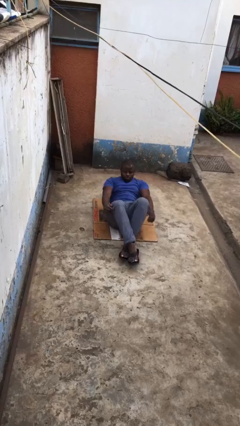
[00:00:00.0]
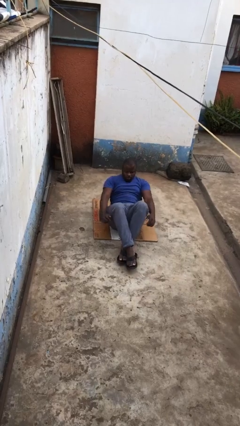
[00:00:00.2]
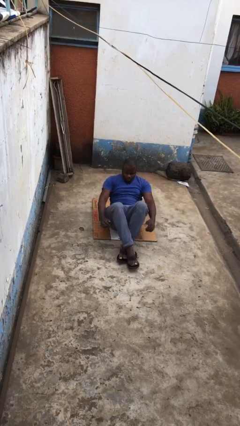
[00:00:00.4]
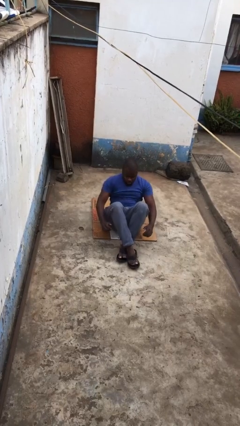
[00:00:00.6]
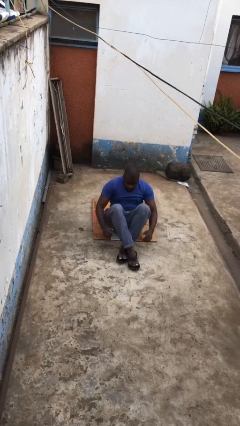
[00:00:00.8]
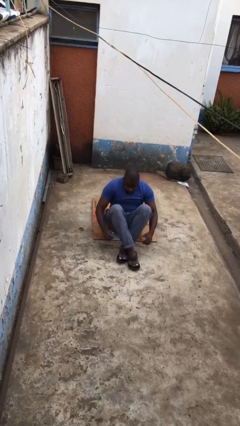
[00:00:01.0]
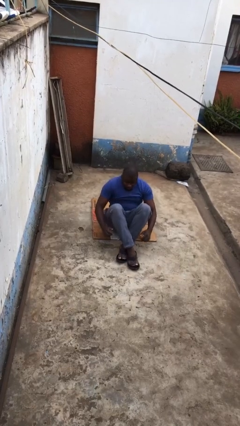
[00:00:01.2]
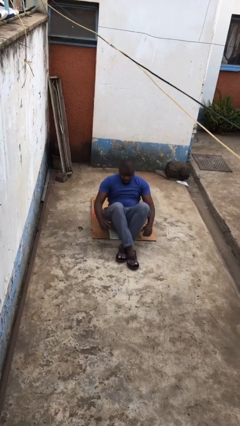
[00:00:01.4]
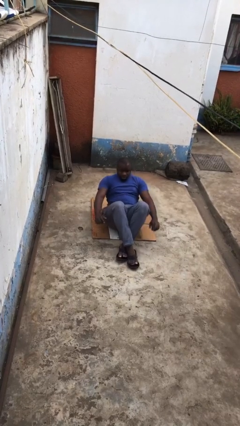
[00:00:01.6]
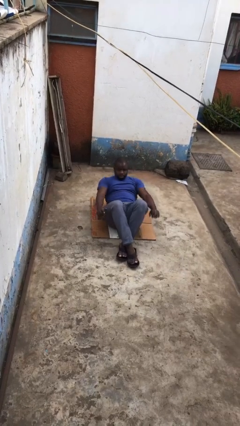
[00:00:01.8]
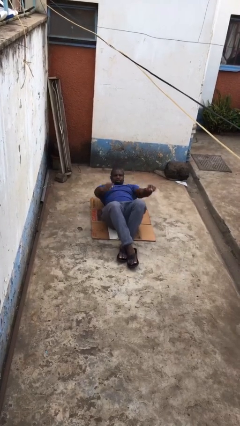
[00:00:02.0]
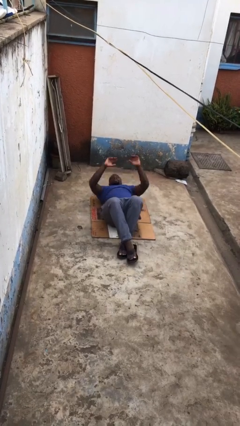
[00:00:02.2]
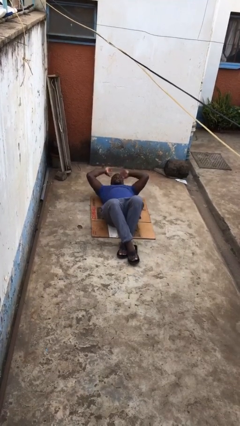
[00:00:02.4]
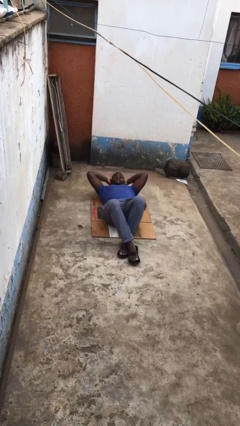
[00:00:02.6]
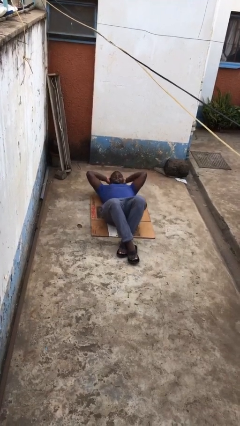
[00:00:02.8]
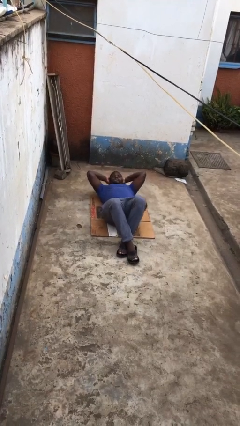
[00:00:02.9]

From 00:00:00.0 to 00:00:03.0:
person exercises with situp

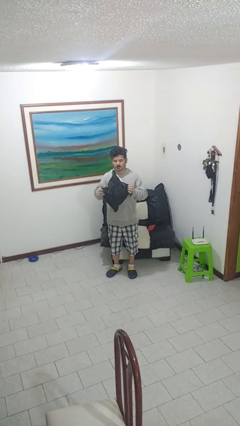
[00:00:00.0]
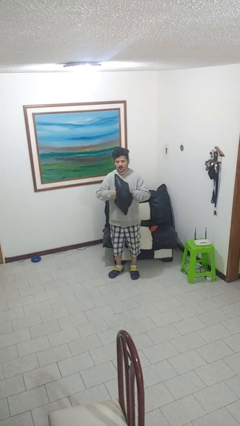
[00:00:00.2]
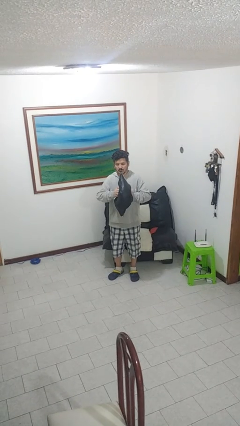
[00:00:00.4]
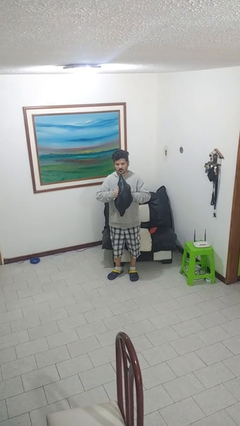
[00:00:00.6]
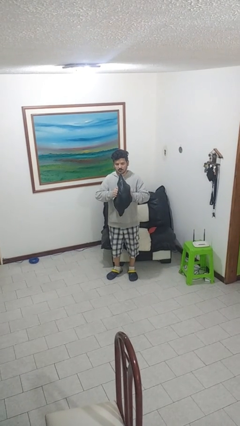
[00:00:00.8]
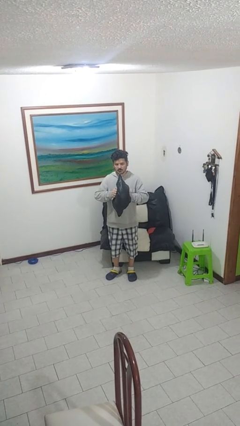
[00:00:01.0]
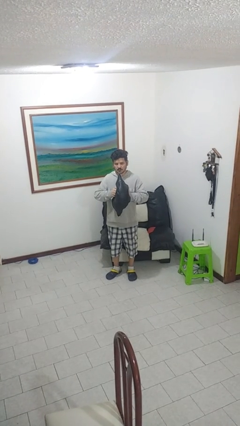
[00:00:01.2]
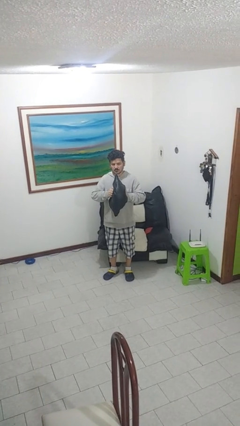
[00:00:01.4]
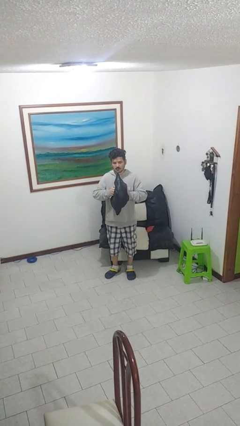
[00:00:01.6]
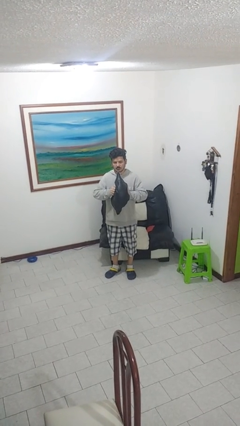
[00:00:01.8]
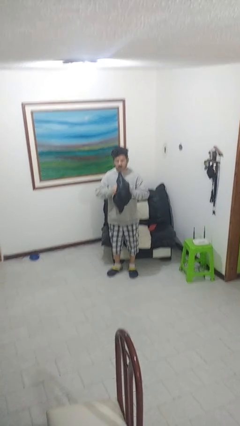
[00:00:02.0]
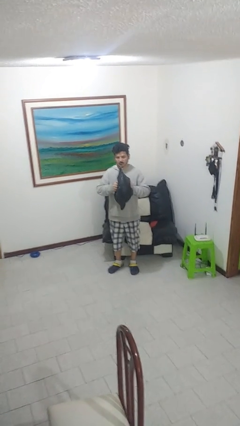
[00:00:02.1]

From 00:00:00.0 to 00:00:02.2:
person squeezes object

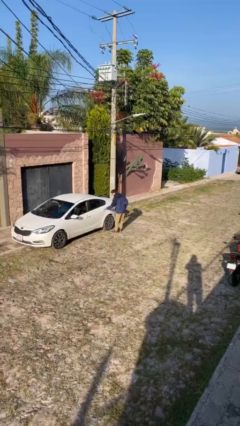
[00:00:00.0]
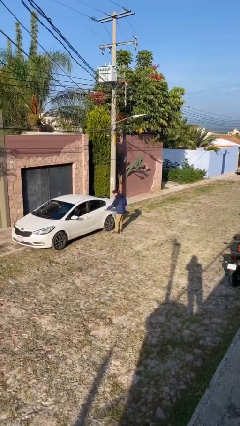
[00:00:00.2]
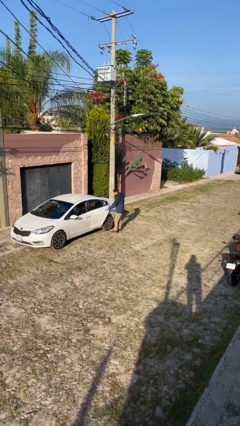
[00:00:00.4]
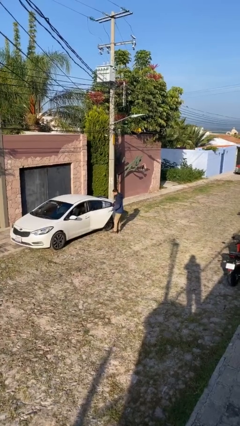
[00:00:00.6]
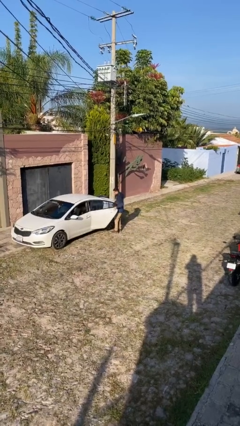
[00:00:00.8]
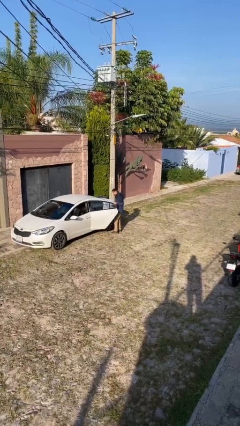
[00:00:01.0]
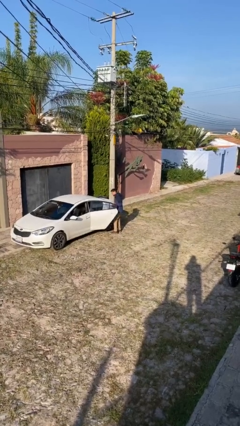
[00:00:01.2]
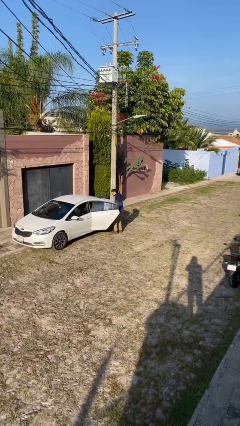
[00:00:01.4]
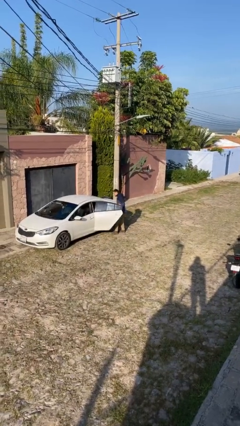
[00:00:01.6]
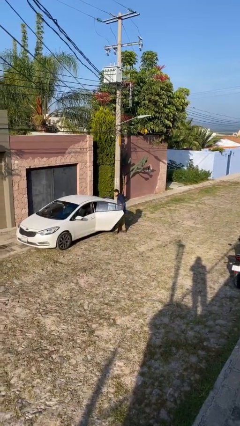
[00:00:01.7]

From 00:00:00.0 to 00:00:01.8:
person opens car door

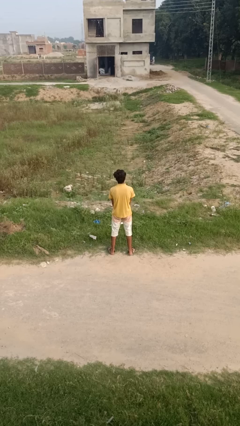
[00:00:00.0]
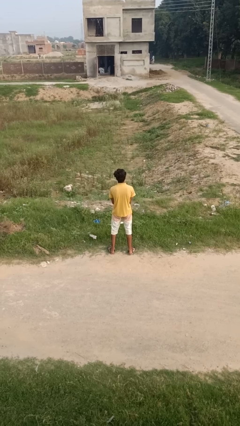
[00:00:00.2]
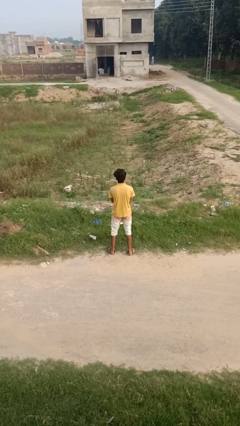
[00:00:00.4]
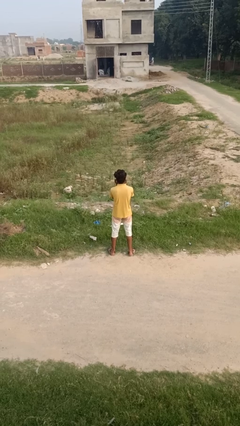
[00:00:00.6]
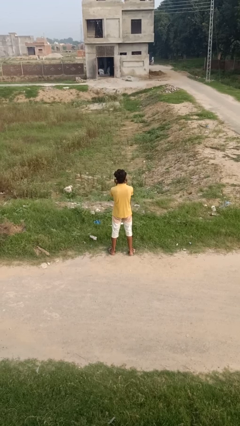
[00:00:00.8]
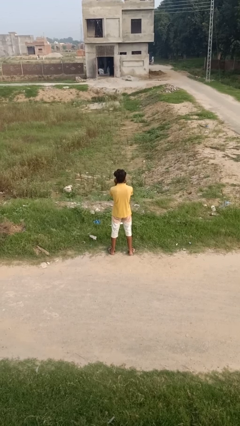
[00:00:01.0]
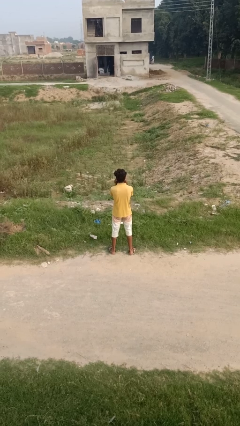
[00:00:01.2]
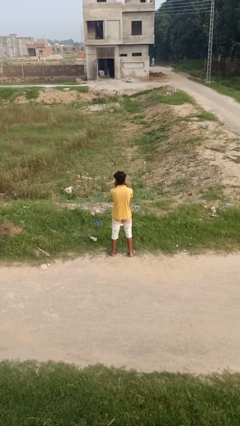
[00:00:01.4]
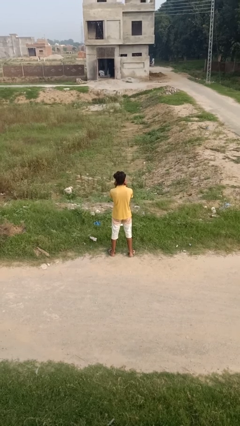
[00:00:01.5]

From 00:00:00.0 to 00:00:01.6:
person touches earlobe

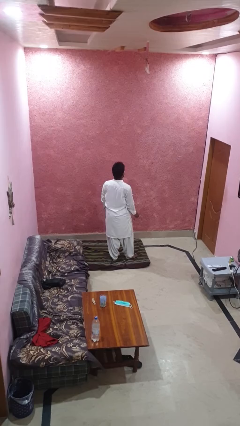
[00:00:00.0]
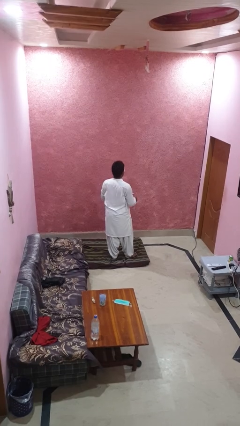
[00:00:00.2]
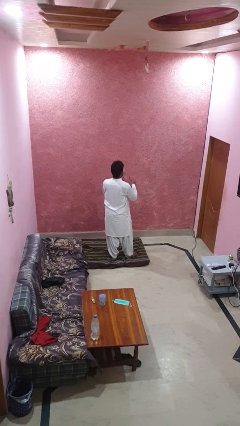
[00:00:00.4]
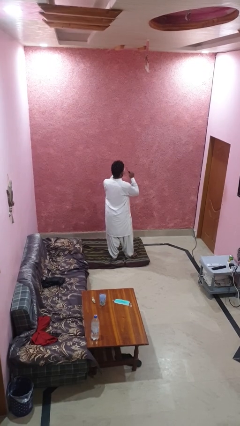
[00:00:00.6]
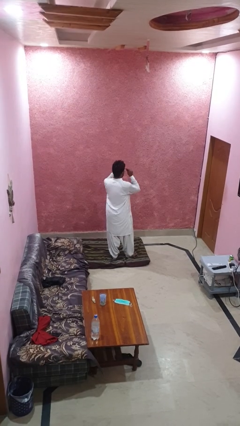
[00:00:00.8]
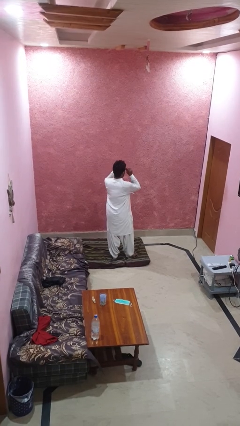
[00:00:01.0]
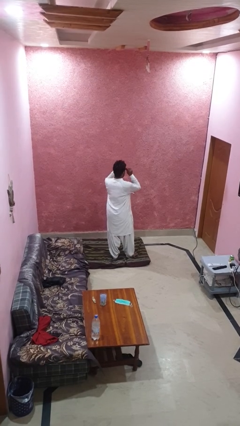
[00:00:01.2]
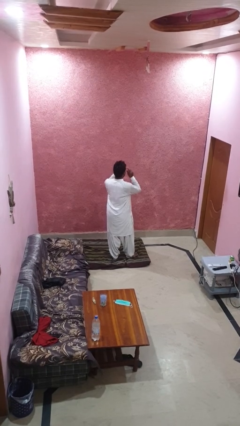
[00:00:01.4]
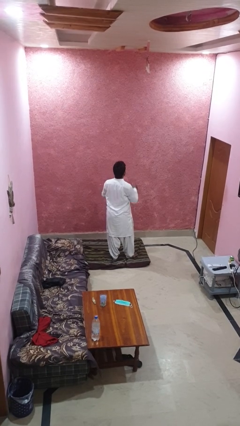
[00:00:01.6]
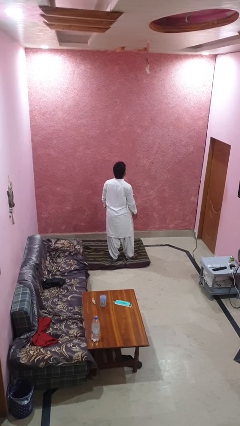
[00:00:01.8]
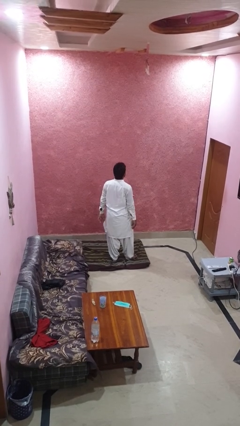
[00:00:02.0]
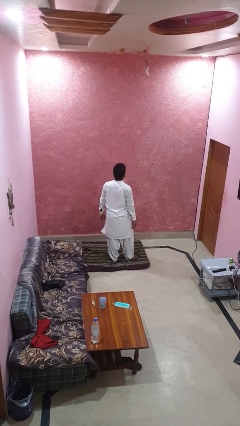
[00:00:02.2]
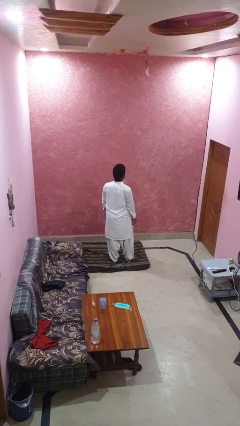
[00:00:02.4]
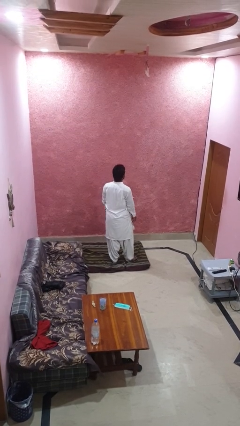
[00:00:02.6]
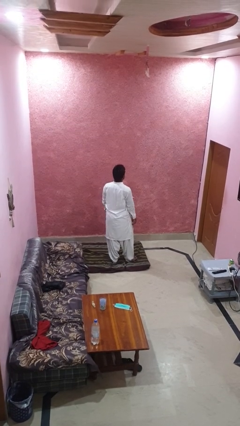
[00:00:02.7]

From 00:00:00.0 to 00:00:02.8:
person puts on glasses

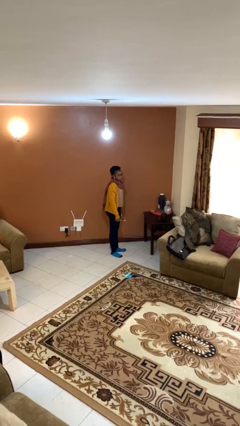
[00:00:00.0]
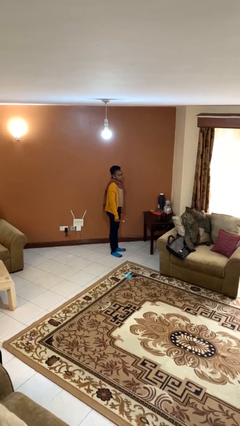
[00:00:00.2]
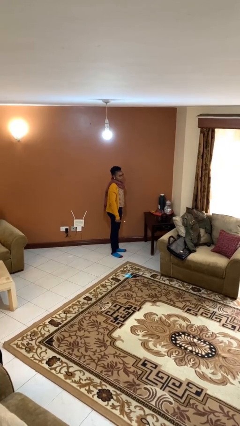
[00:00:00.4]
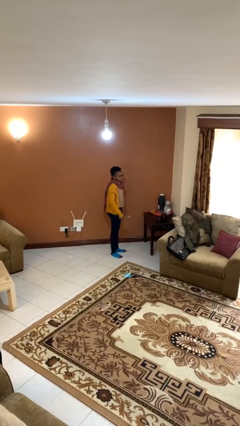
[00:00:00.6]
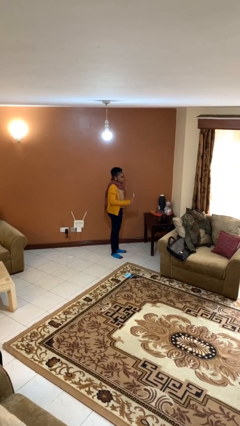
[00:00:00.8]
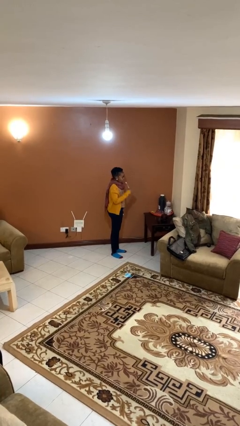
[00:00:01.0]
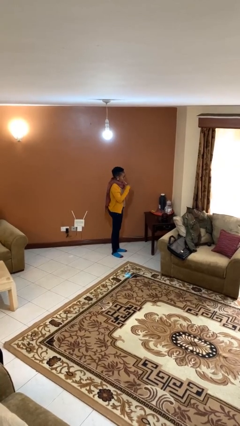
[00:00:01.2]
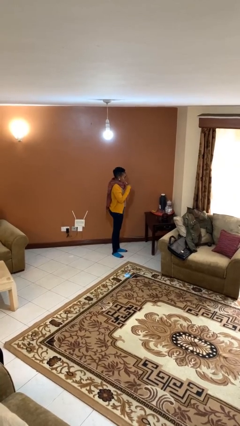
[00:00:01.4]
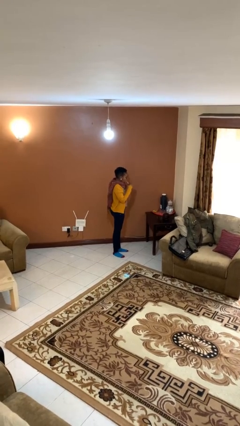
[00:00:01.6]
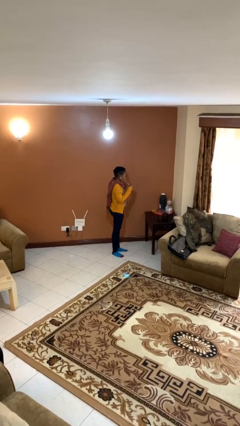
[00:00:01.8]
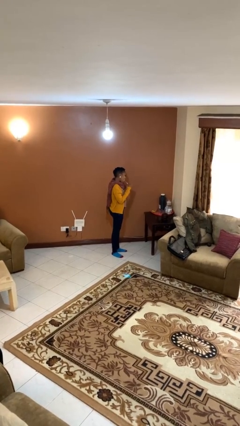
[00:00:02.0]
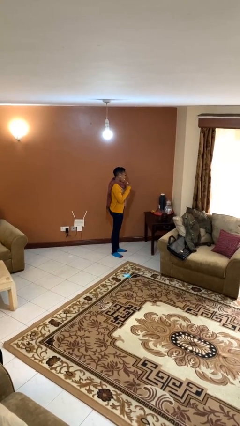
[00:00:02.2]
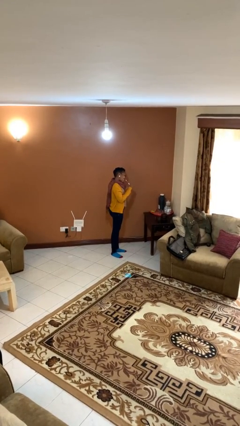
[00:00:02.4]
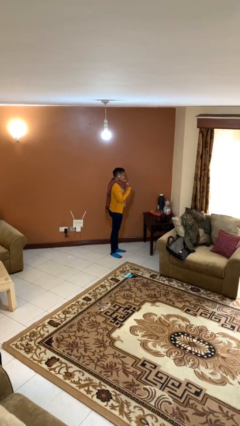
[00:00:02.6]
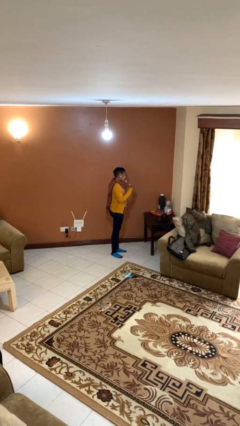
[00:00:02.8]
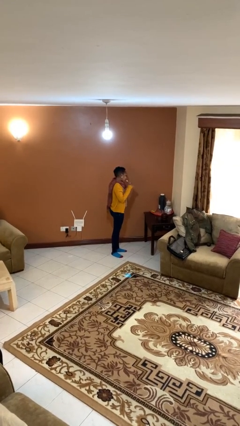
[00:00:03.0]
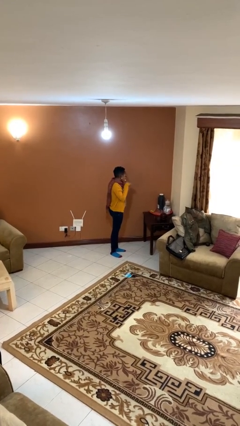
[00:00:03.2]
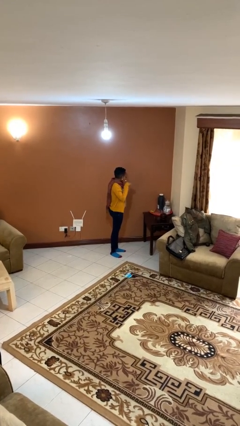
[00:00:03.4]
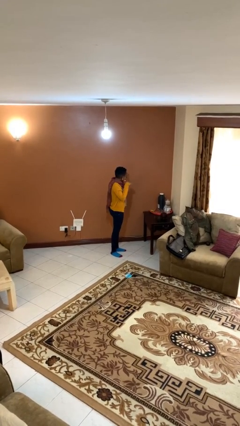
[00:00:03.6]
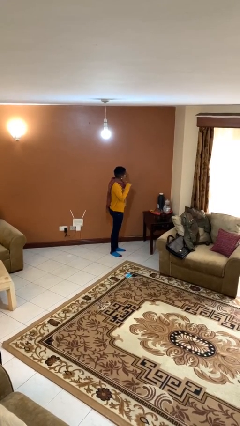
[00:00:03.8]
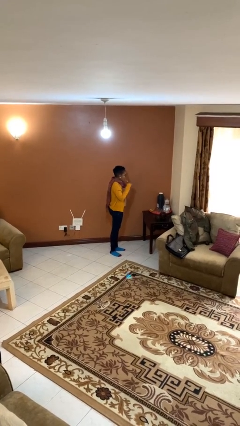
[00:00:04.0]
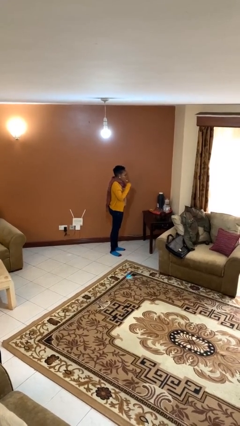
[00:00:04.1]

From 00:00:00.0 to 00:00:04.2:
person brushes teeth

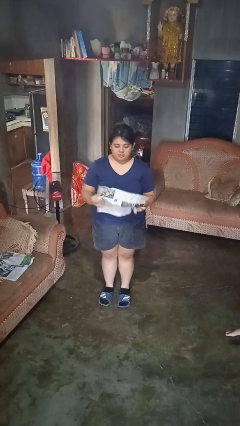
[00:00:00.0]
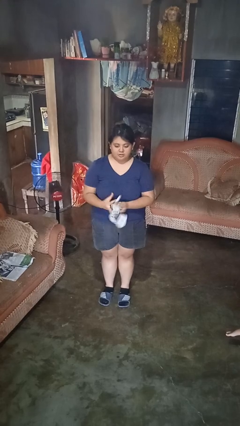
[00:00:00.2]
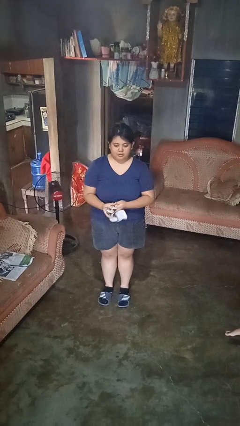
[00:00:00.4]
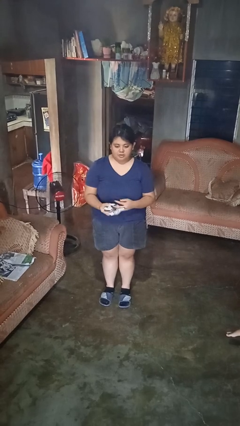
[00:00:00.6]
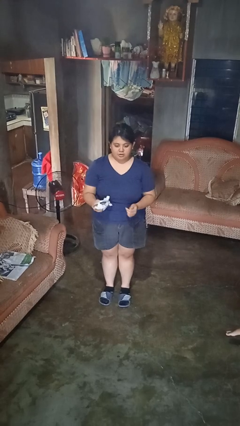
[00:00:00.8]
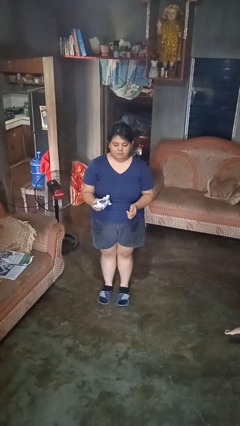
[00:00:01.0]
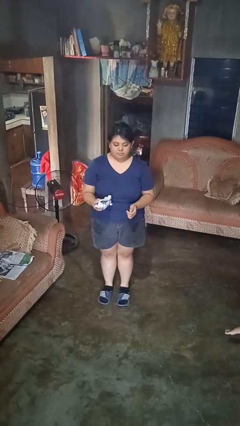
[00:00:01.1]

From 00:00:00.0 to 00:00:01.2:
person crumples paper

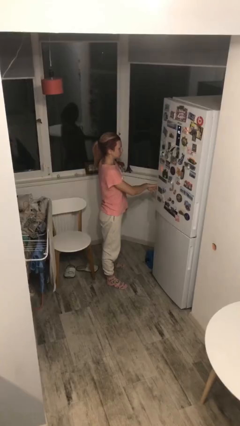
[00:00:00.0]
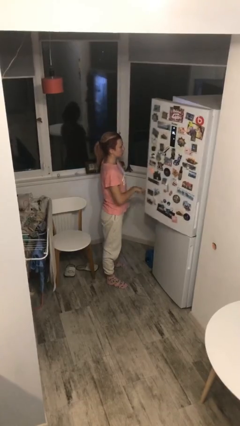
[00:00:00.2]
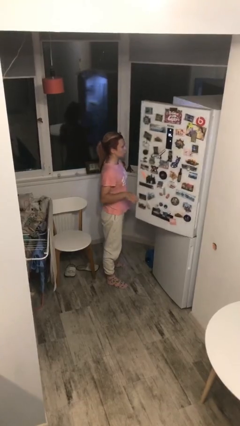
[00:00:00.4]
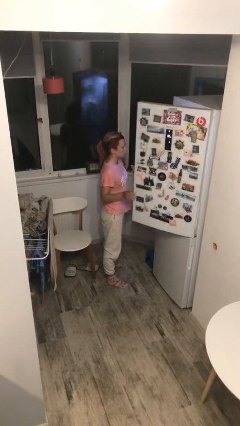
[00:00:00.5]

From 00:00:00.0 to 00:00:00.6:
person opens refrigerator
